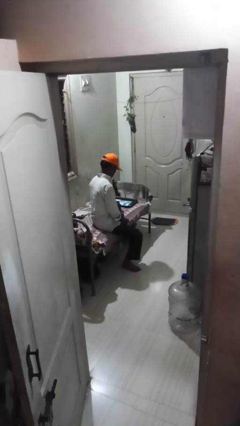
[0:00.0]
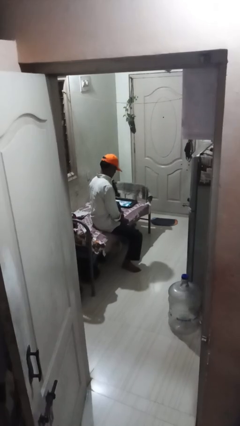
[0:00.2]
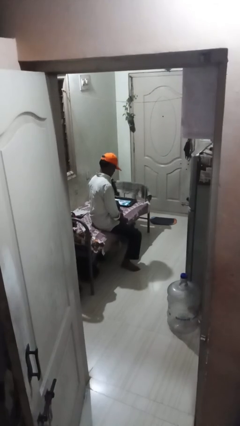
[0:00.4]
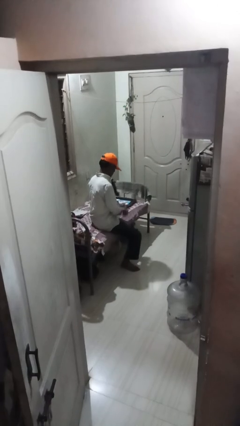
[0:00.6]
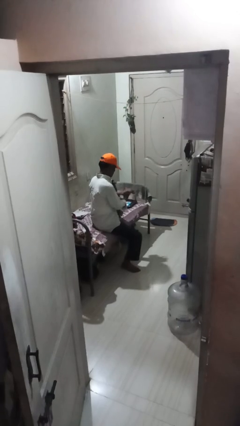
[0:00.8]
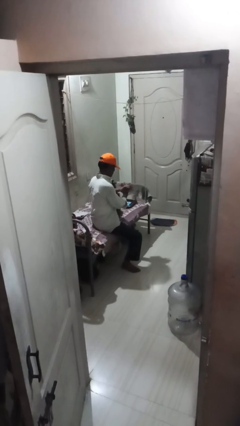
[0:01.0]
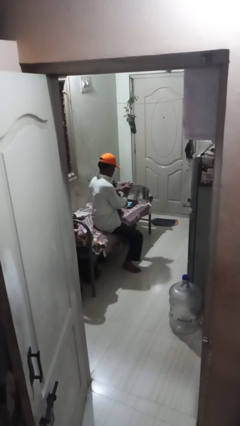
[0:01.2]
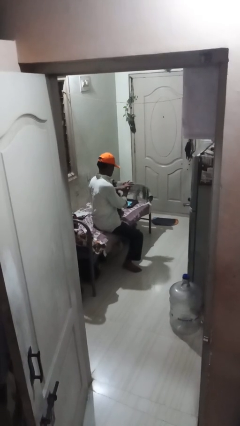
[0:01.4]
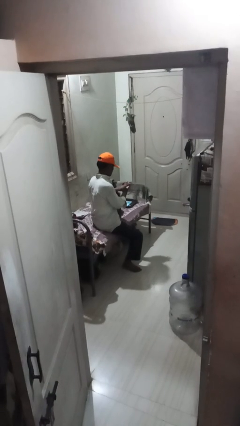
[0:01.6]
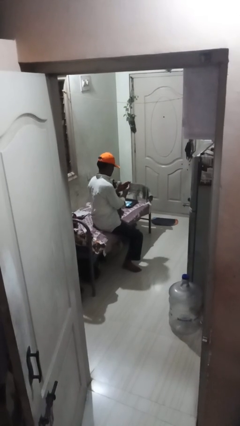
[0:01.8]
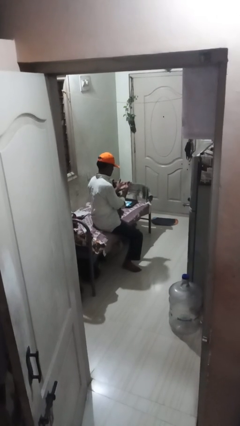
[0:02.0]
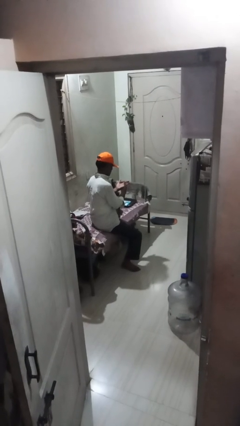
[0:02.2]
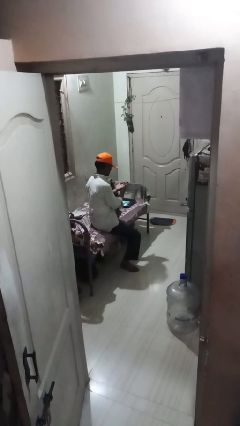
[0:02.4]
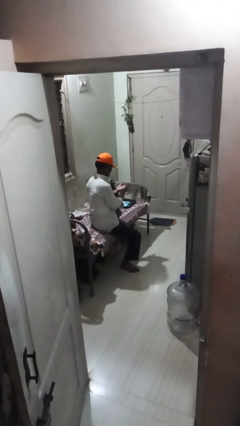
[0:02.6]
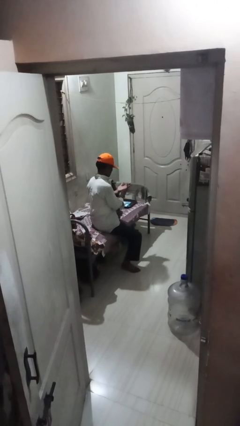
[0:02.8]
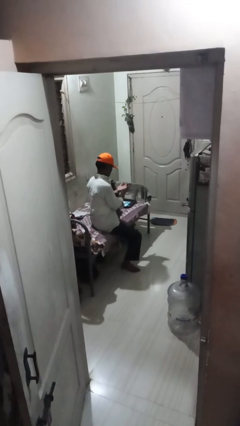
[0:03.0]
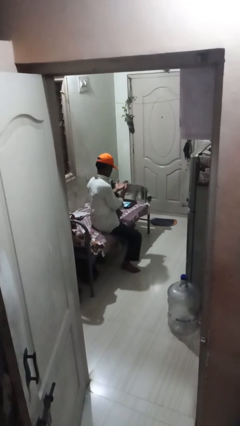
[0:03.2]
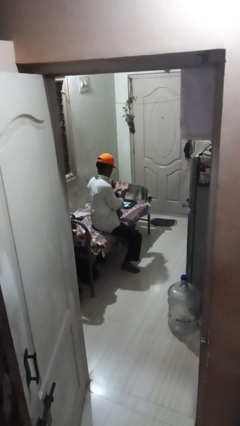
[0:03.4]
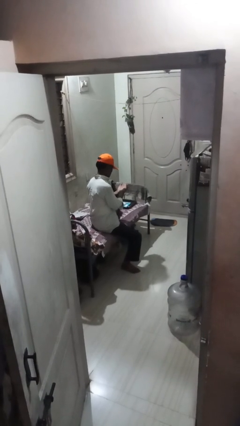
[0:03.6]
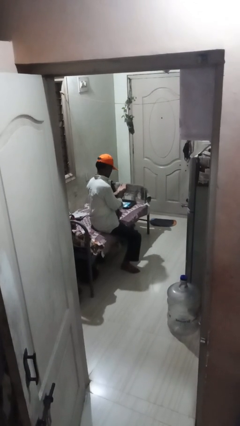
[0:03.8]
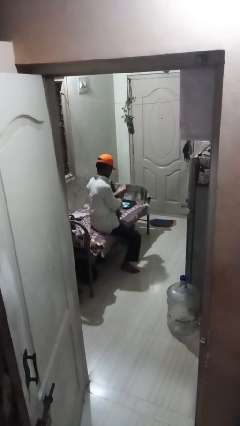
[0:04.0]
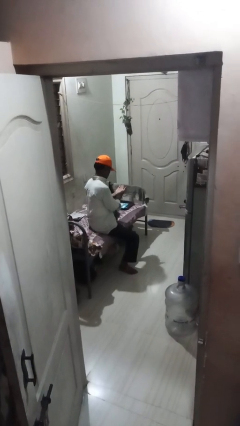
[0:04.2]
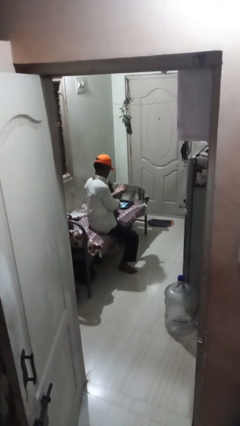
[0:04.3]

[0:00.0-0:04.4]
person looks at hands in lap

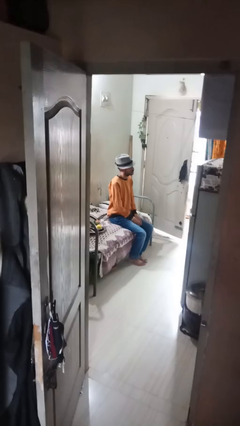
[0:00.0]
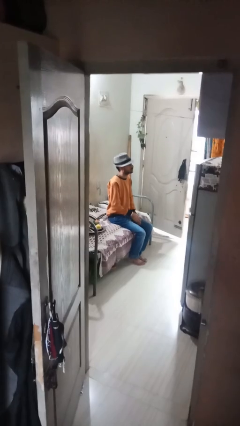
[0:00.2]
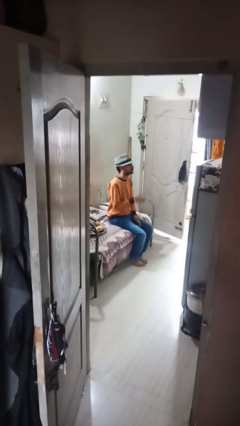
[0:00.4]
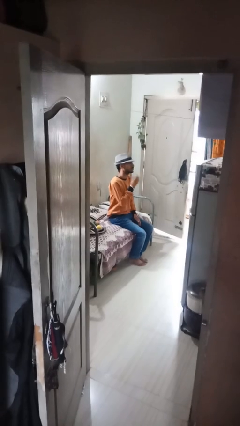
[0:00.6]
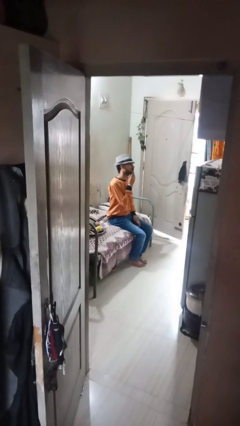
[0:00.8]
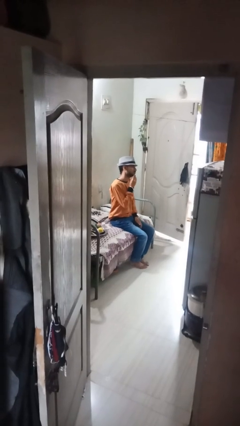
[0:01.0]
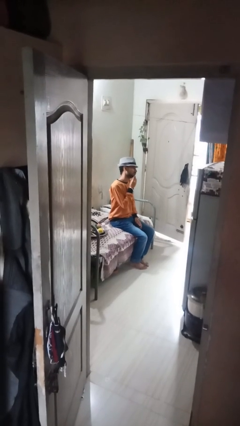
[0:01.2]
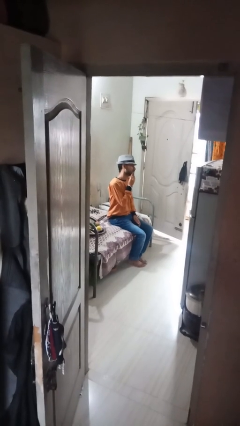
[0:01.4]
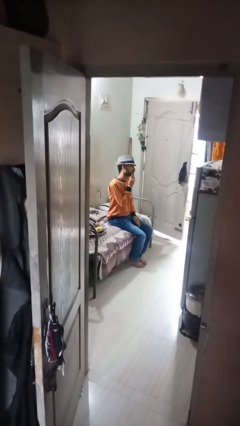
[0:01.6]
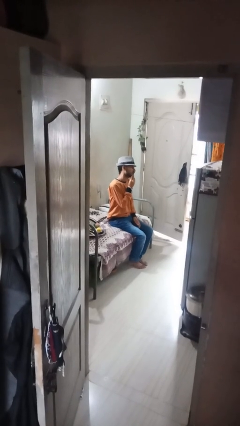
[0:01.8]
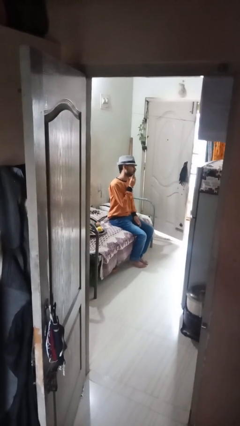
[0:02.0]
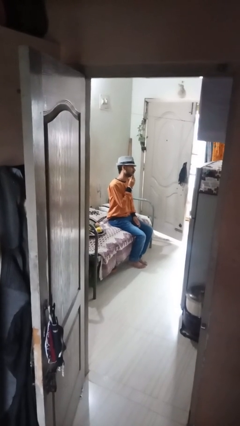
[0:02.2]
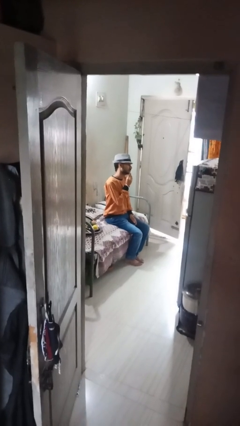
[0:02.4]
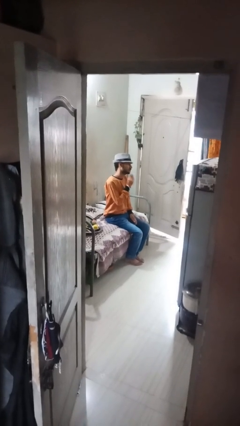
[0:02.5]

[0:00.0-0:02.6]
person strokes chin

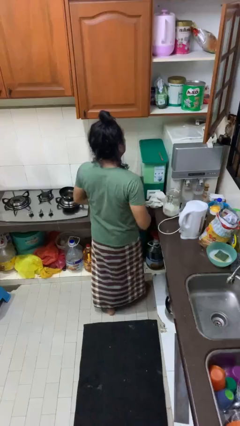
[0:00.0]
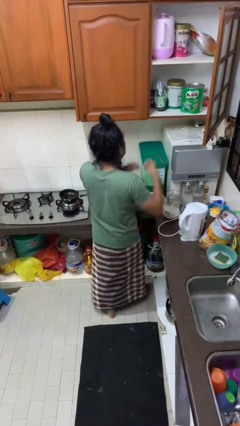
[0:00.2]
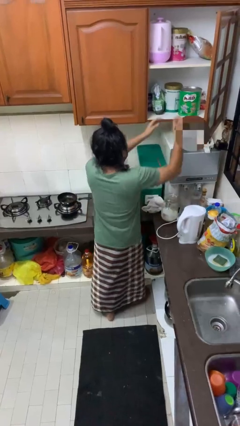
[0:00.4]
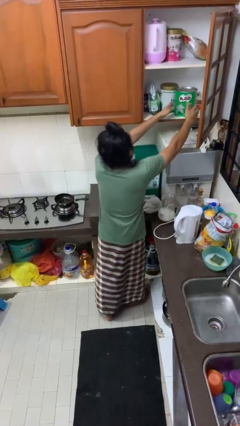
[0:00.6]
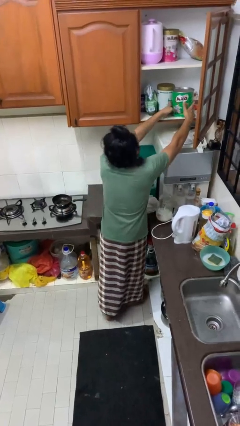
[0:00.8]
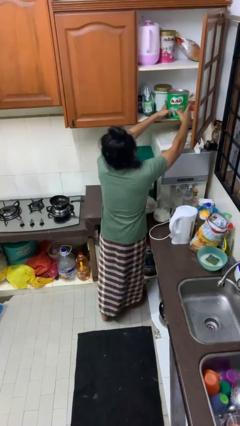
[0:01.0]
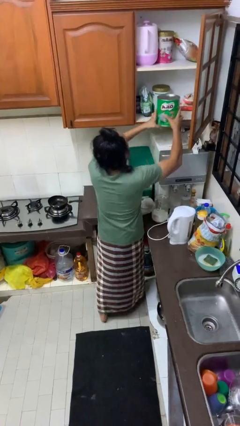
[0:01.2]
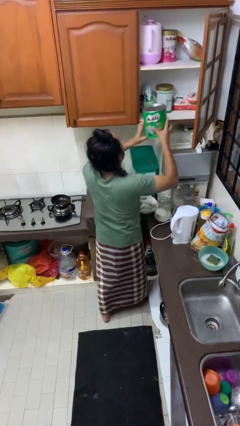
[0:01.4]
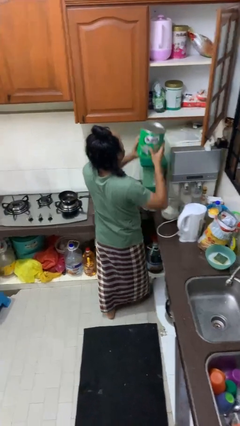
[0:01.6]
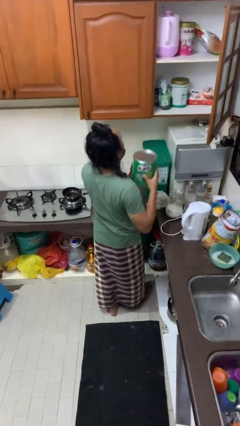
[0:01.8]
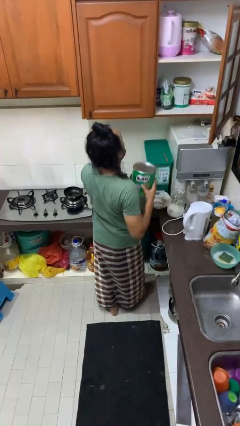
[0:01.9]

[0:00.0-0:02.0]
person takes object from cabinet

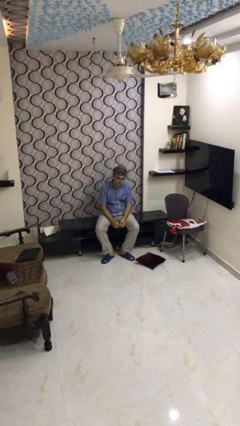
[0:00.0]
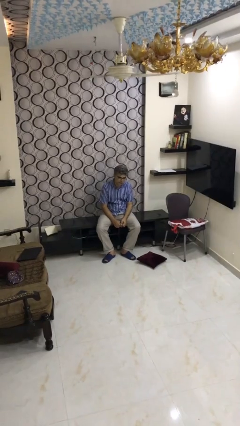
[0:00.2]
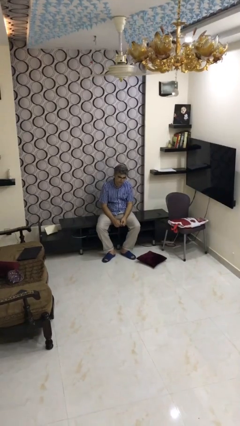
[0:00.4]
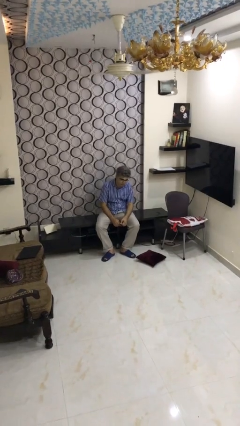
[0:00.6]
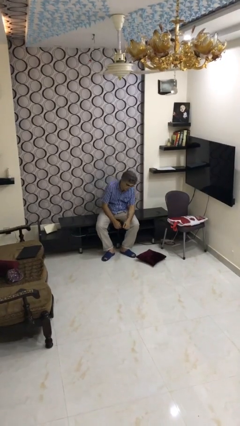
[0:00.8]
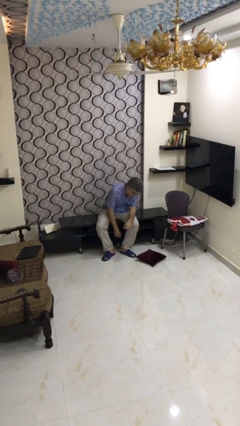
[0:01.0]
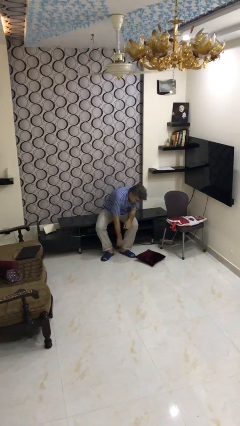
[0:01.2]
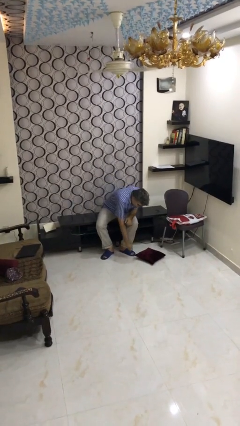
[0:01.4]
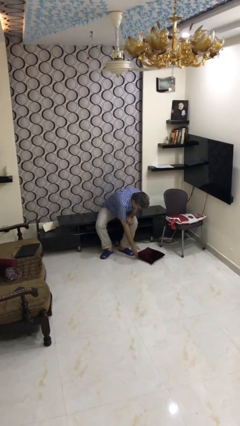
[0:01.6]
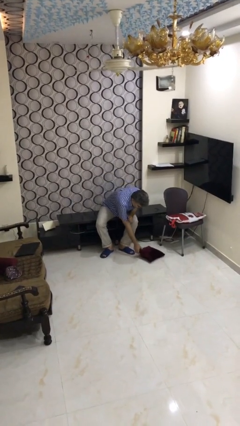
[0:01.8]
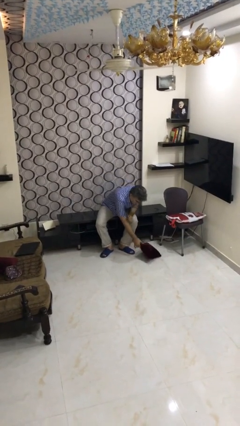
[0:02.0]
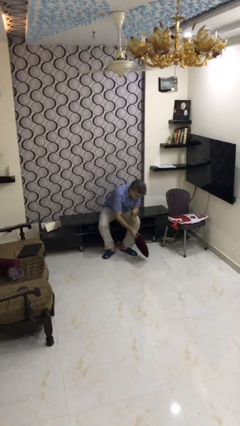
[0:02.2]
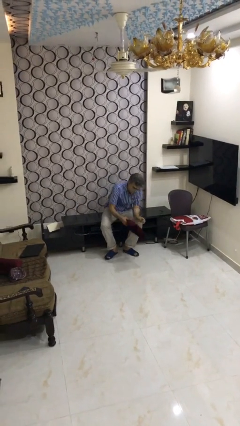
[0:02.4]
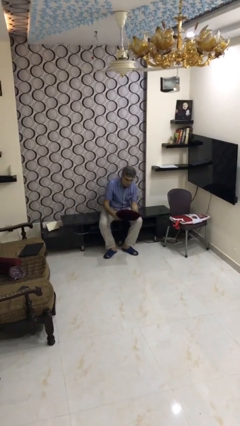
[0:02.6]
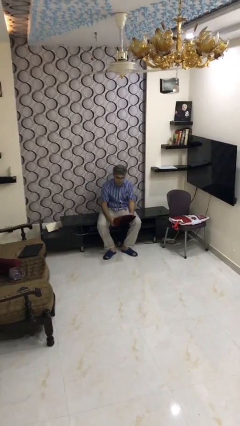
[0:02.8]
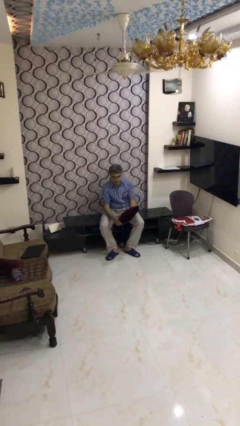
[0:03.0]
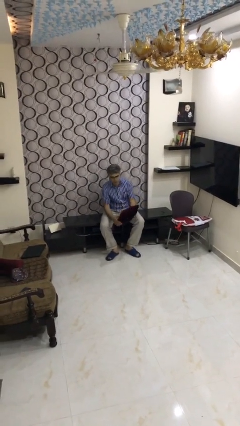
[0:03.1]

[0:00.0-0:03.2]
person picks up object from floor

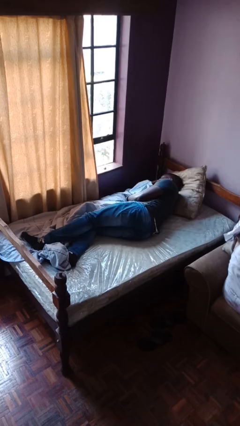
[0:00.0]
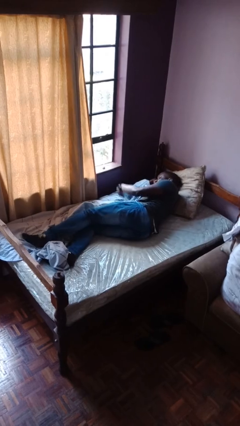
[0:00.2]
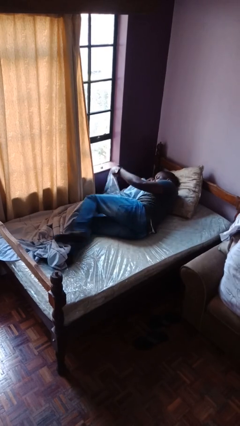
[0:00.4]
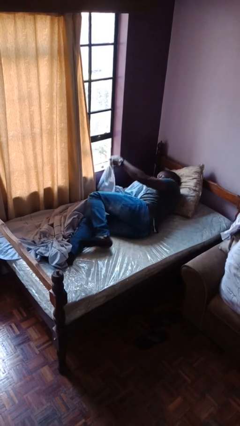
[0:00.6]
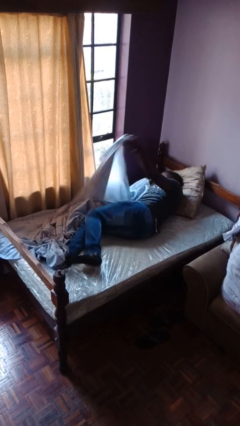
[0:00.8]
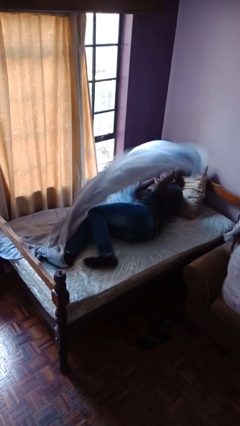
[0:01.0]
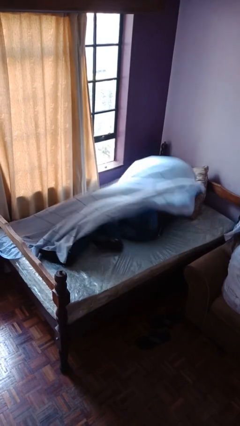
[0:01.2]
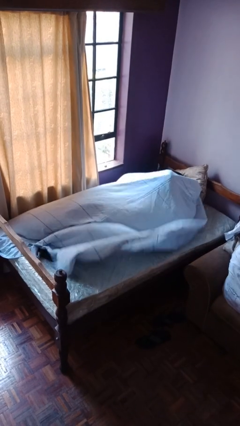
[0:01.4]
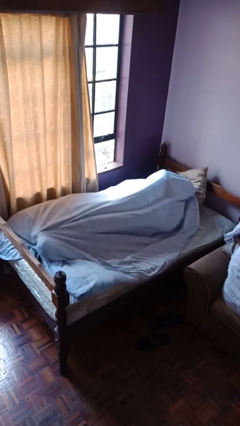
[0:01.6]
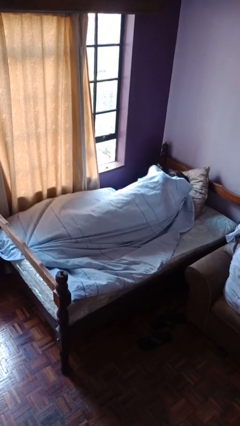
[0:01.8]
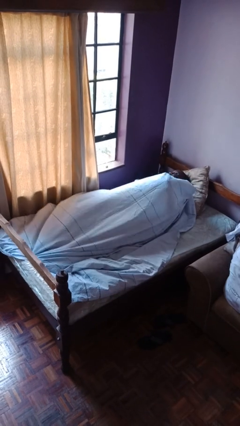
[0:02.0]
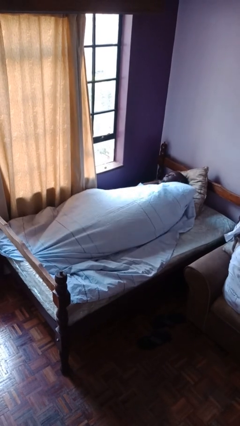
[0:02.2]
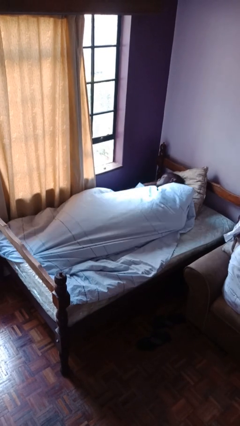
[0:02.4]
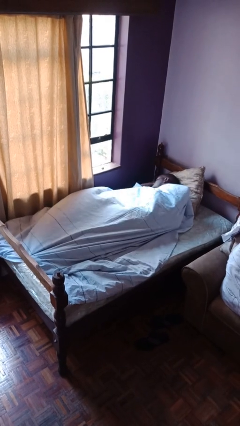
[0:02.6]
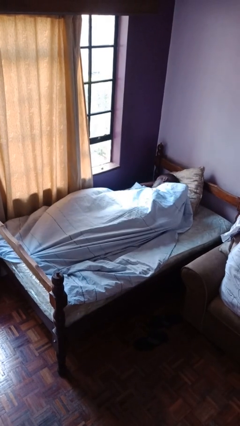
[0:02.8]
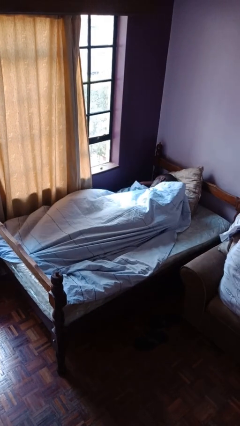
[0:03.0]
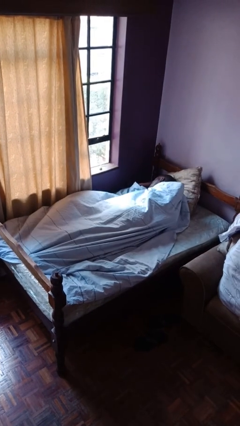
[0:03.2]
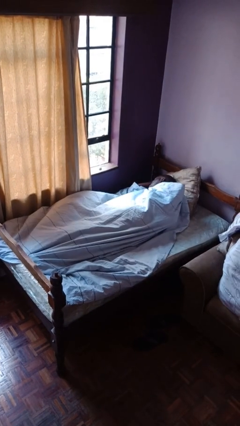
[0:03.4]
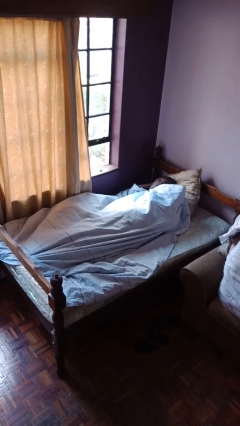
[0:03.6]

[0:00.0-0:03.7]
person covers with bedsheets

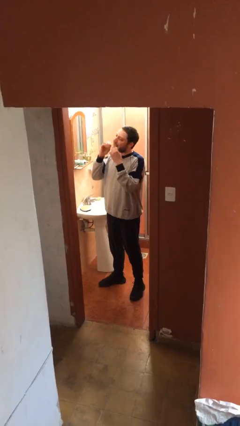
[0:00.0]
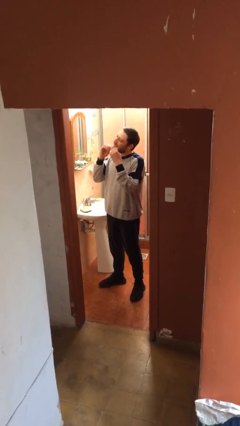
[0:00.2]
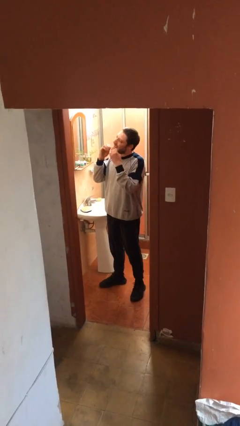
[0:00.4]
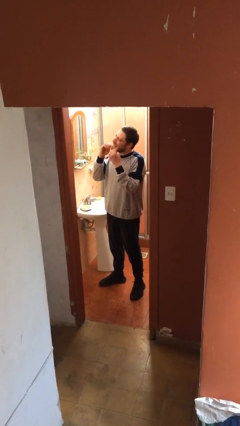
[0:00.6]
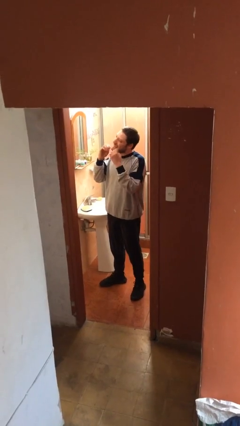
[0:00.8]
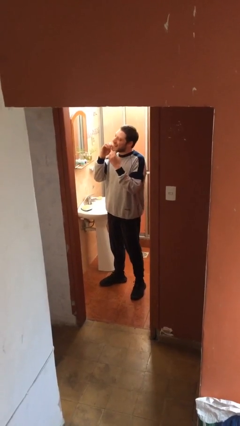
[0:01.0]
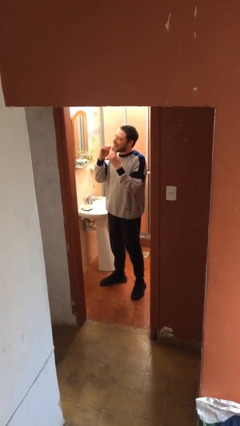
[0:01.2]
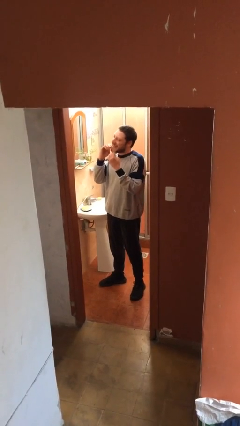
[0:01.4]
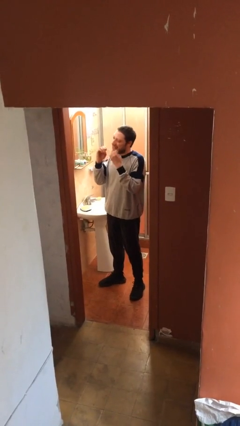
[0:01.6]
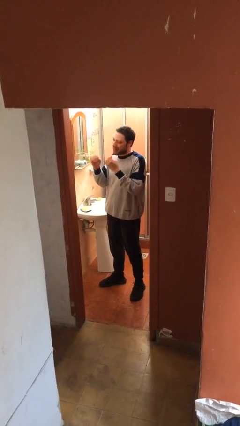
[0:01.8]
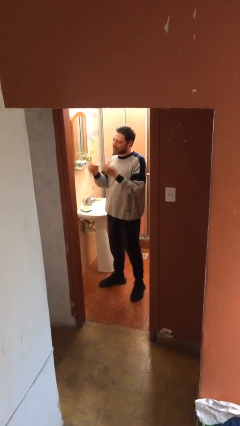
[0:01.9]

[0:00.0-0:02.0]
person flosses
